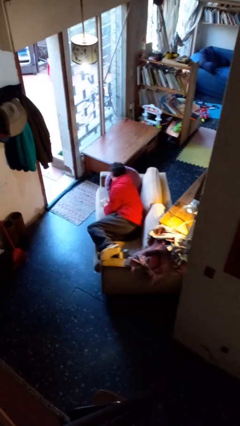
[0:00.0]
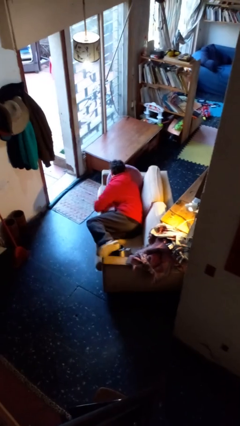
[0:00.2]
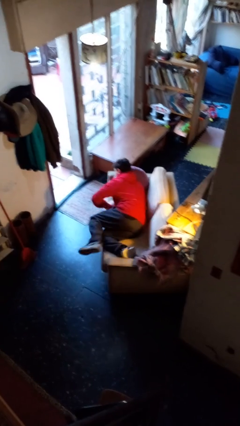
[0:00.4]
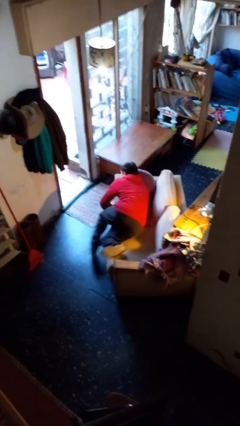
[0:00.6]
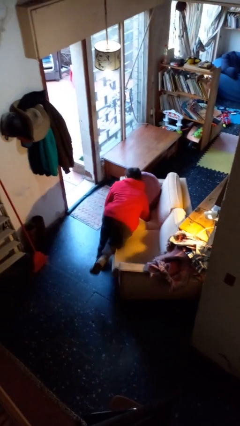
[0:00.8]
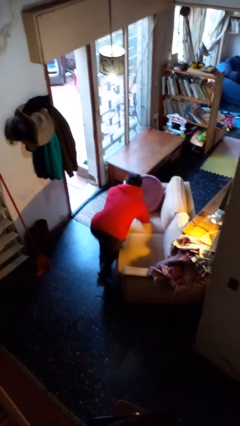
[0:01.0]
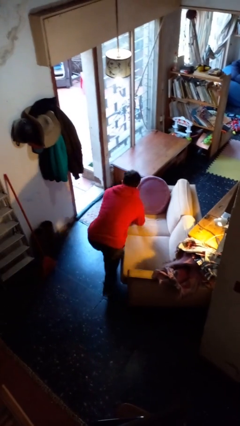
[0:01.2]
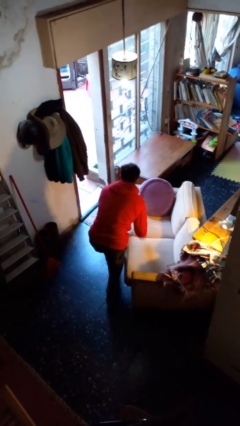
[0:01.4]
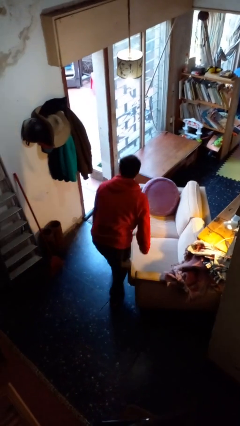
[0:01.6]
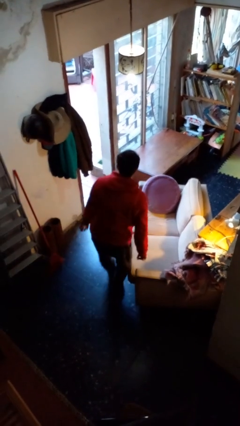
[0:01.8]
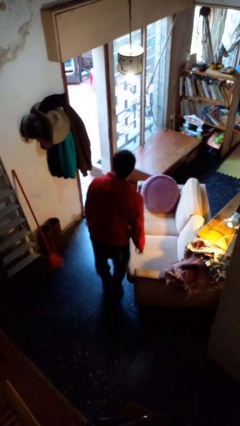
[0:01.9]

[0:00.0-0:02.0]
person stands up

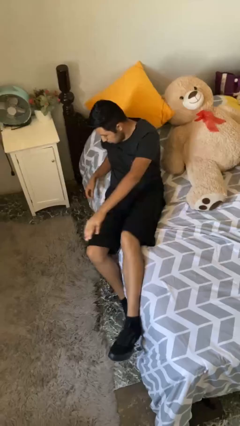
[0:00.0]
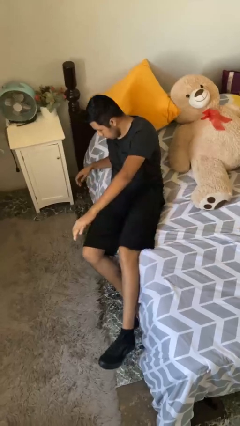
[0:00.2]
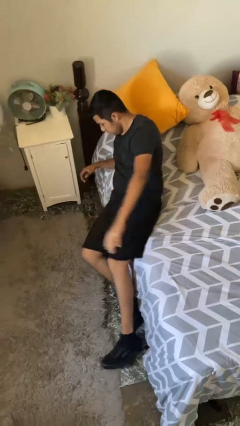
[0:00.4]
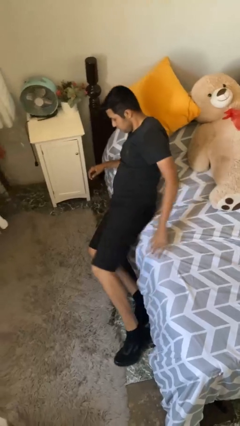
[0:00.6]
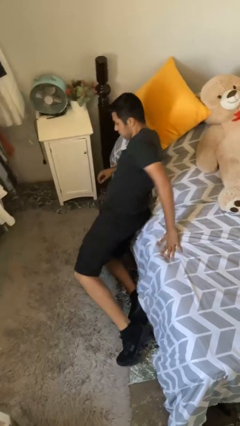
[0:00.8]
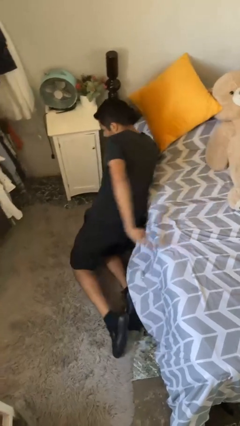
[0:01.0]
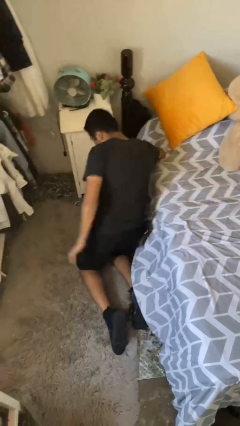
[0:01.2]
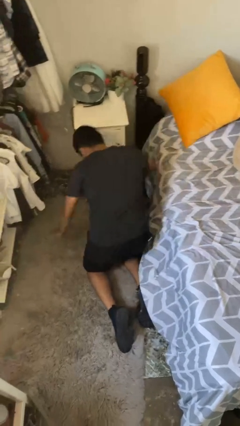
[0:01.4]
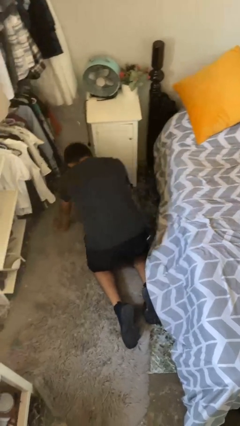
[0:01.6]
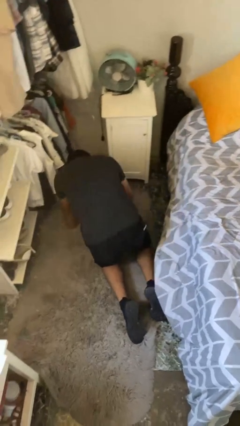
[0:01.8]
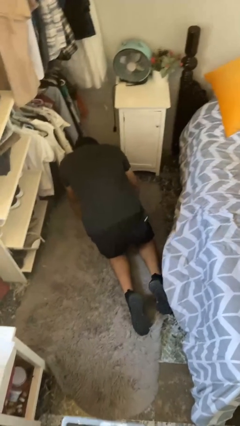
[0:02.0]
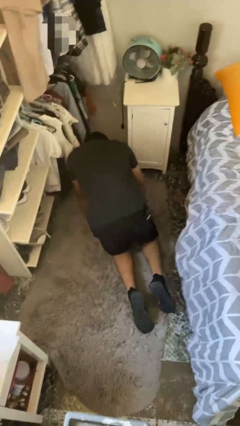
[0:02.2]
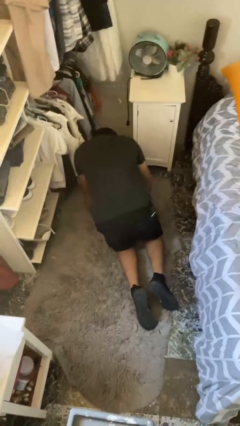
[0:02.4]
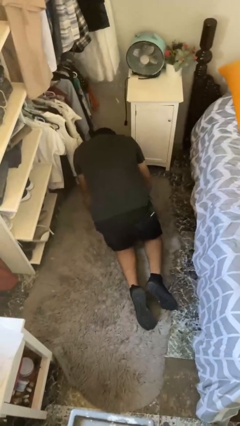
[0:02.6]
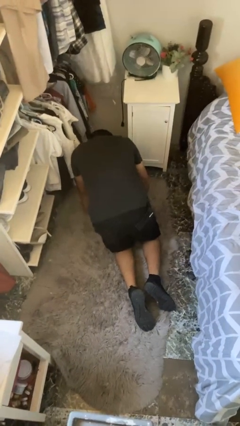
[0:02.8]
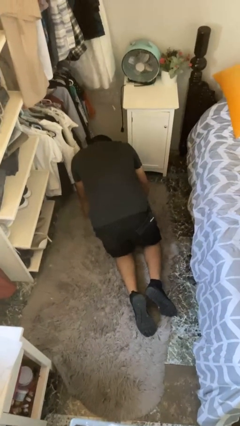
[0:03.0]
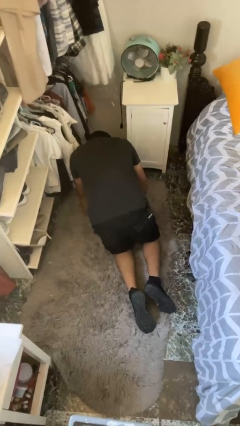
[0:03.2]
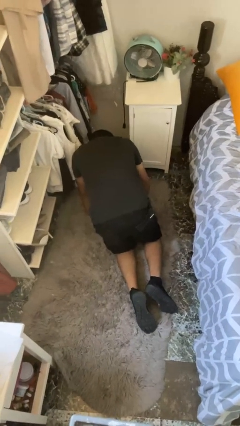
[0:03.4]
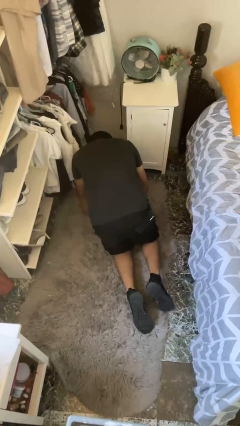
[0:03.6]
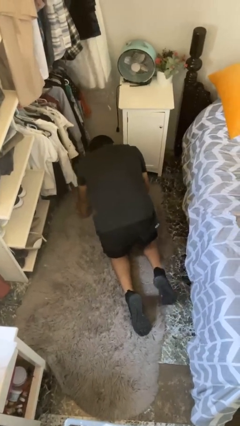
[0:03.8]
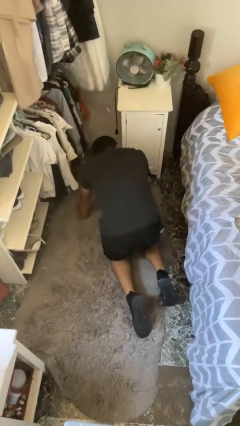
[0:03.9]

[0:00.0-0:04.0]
person falls from bed

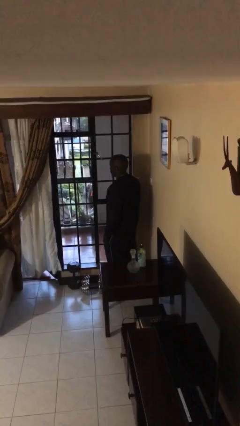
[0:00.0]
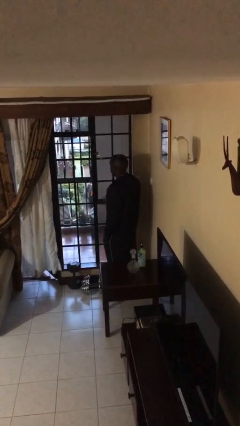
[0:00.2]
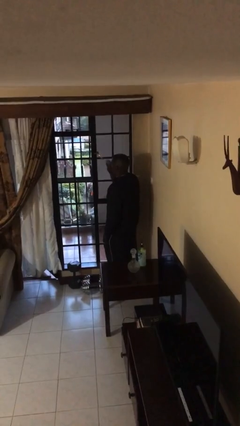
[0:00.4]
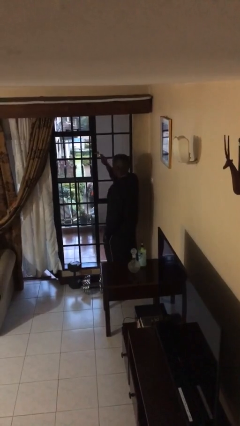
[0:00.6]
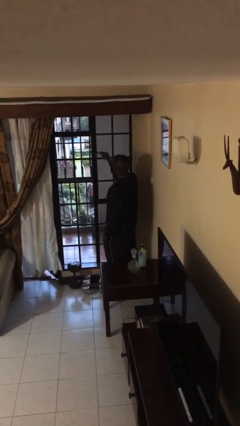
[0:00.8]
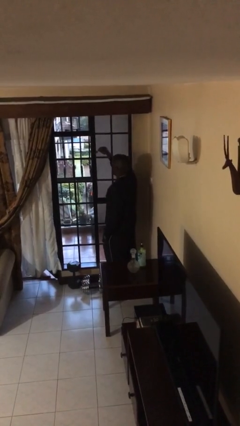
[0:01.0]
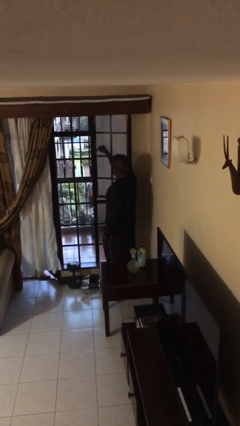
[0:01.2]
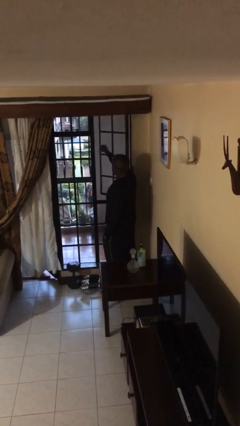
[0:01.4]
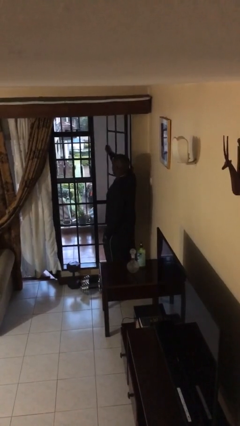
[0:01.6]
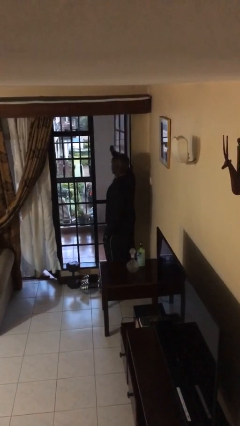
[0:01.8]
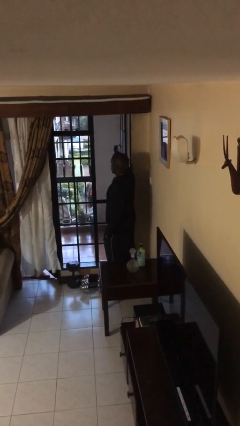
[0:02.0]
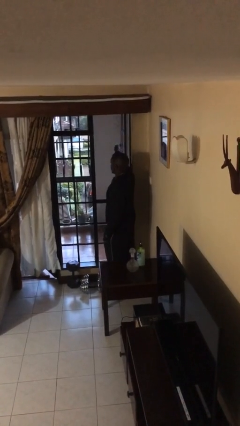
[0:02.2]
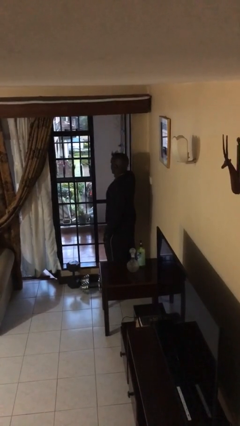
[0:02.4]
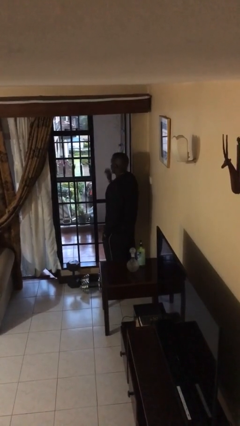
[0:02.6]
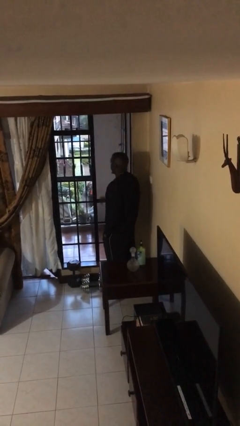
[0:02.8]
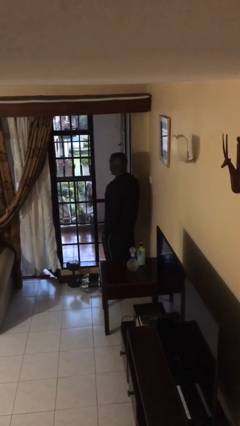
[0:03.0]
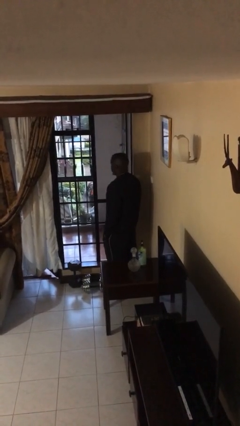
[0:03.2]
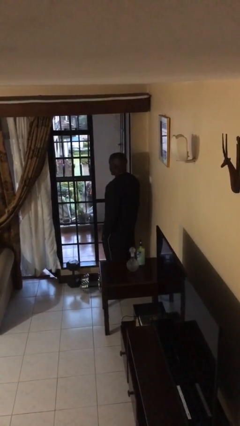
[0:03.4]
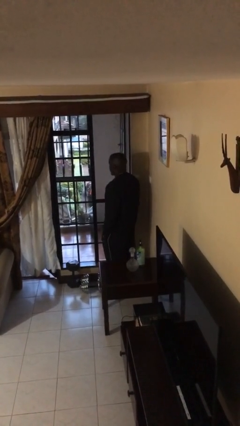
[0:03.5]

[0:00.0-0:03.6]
person opens home window

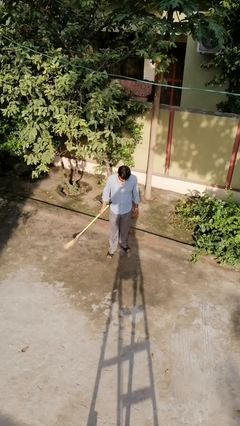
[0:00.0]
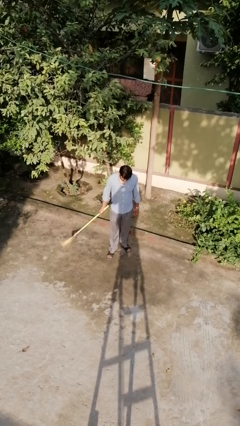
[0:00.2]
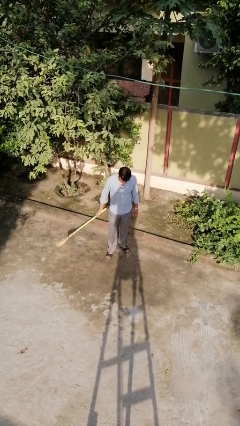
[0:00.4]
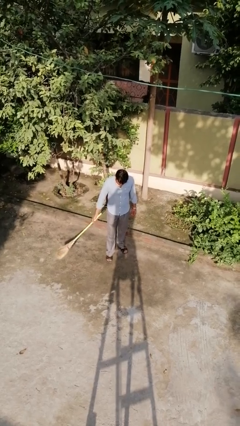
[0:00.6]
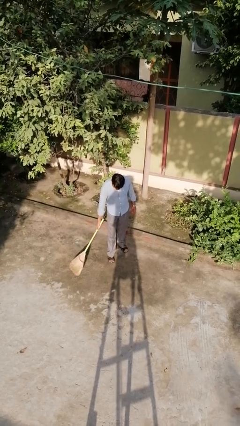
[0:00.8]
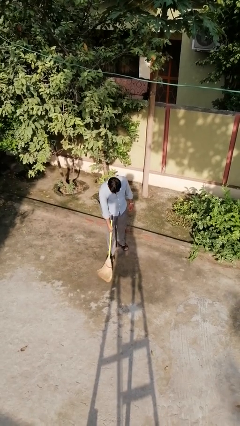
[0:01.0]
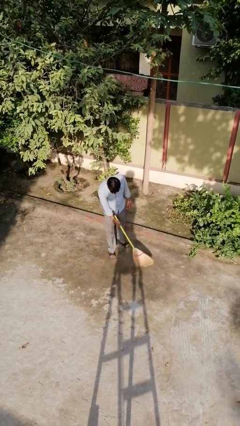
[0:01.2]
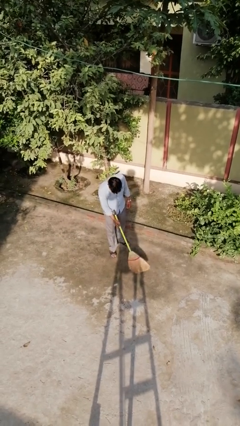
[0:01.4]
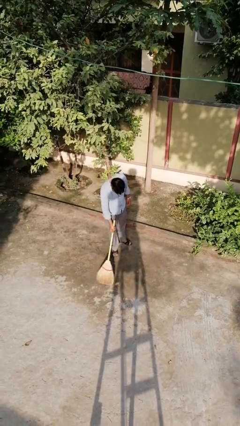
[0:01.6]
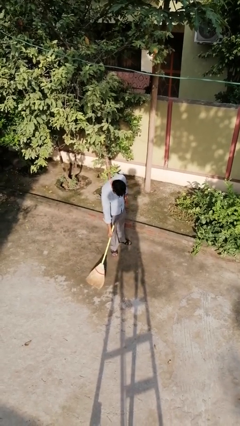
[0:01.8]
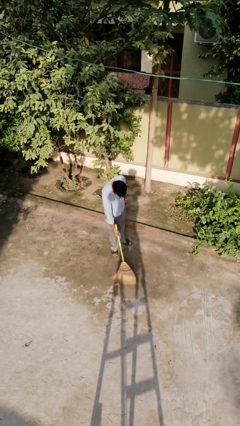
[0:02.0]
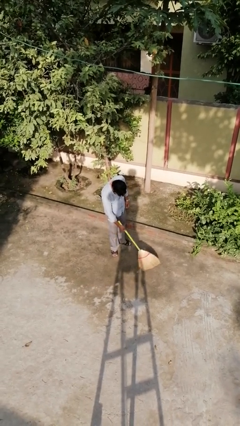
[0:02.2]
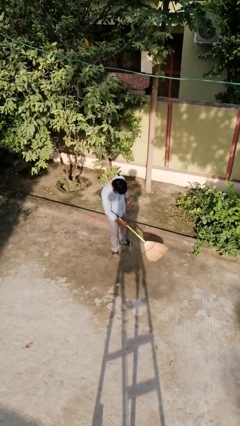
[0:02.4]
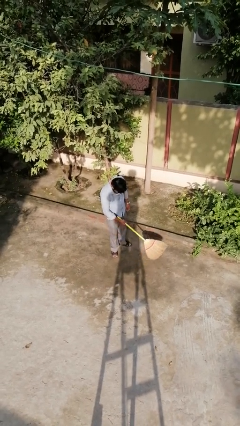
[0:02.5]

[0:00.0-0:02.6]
person sweeps floor

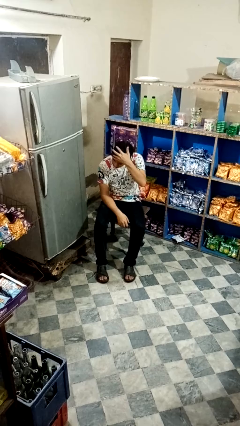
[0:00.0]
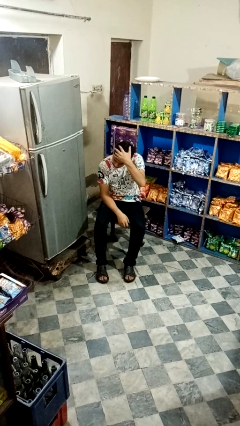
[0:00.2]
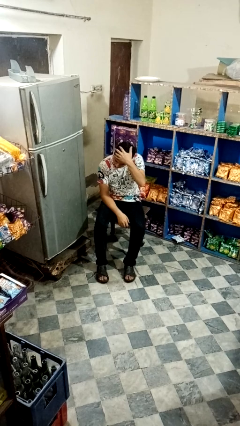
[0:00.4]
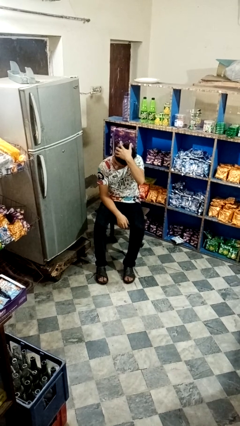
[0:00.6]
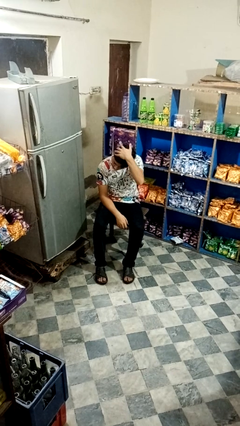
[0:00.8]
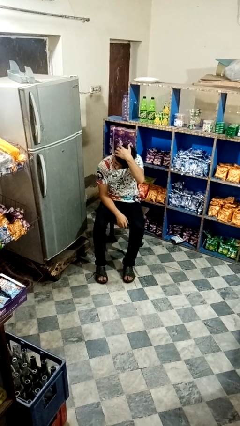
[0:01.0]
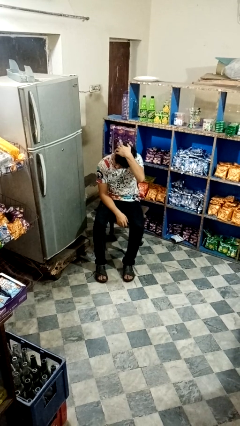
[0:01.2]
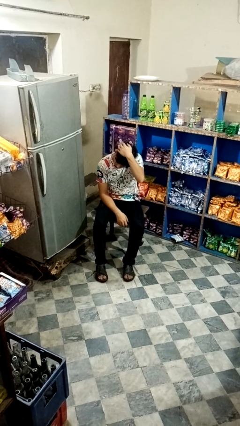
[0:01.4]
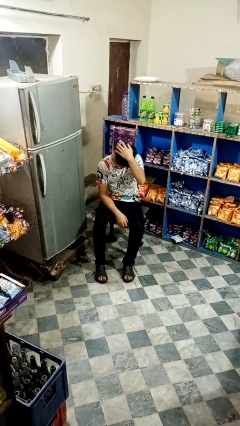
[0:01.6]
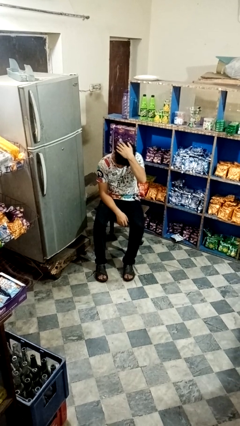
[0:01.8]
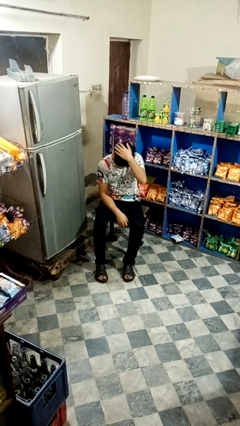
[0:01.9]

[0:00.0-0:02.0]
person pats head

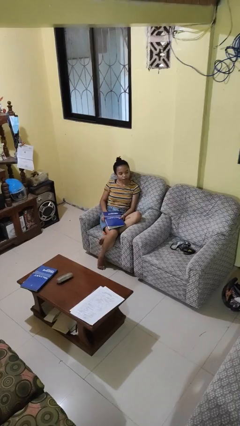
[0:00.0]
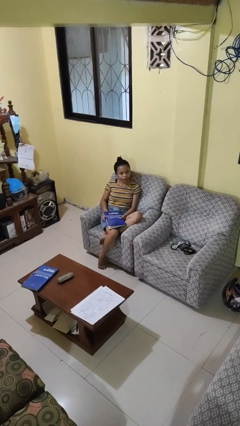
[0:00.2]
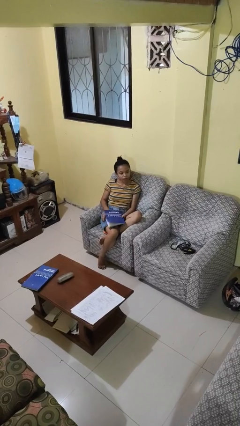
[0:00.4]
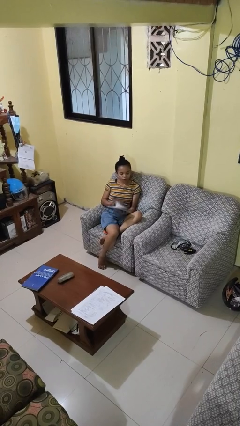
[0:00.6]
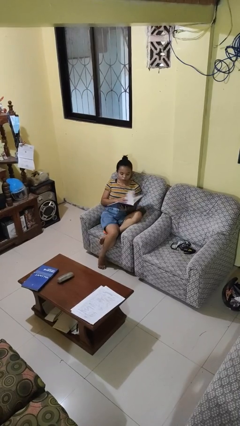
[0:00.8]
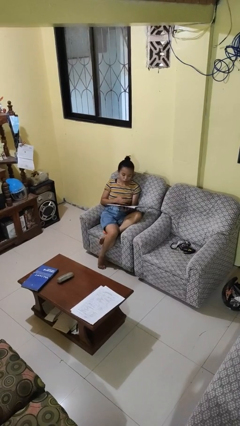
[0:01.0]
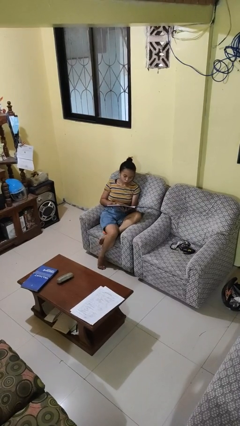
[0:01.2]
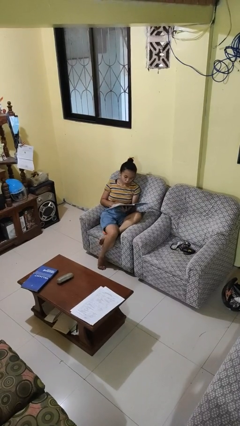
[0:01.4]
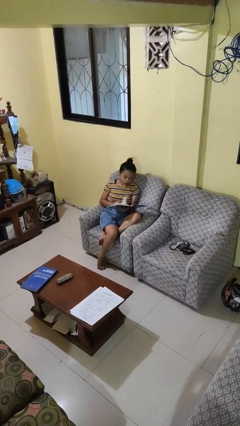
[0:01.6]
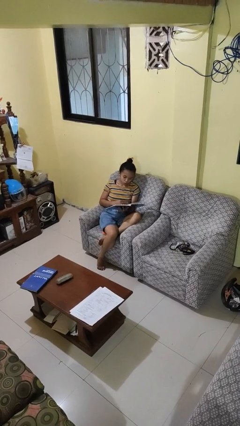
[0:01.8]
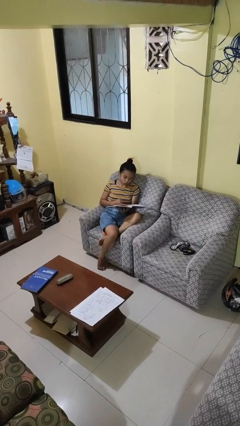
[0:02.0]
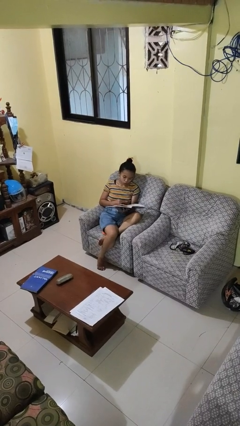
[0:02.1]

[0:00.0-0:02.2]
person reads book

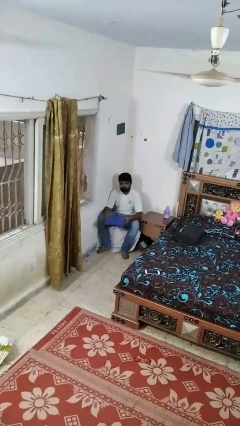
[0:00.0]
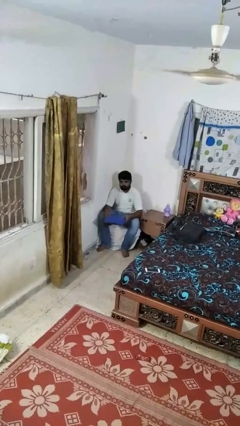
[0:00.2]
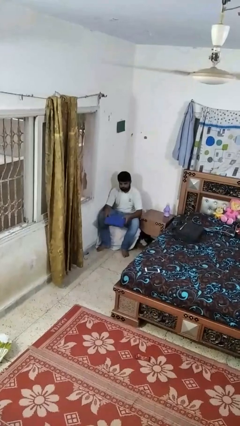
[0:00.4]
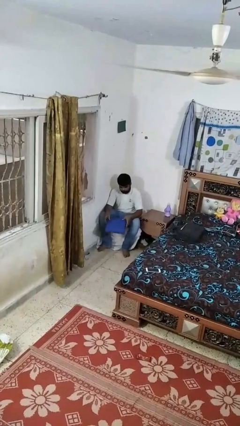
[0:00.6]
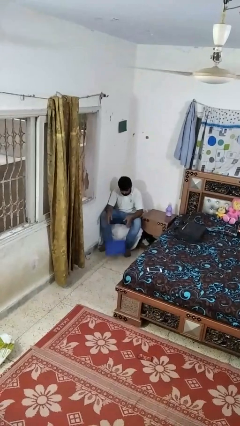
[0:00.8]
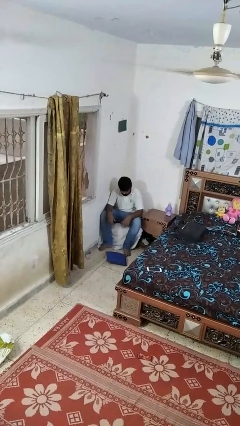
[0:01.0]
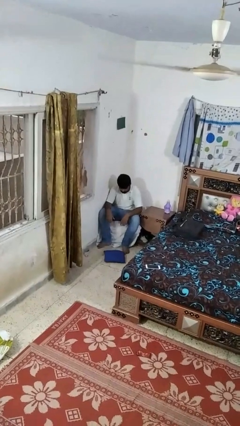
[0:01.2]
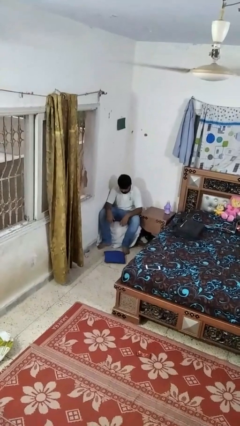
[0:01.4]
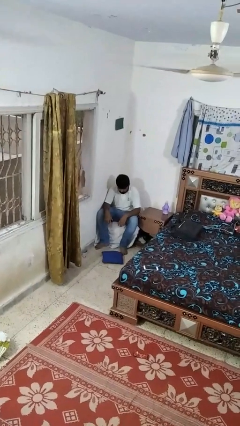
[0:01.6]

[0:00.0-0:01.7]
person drops object
